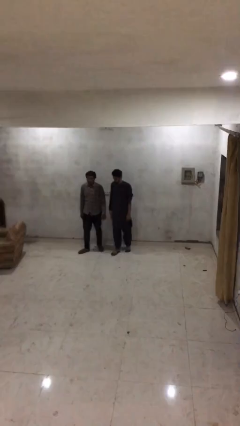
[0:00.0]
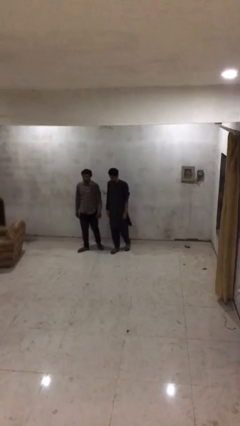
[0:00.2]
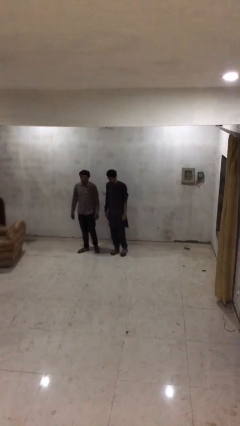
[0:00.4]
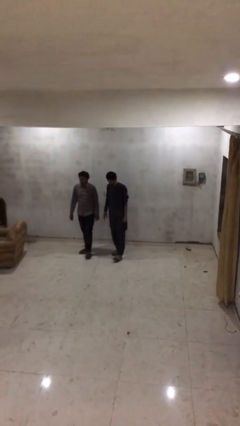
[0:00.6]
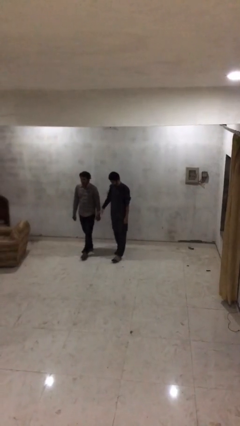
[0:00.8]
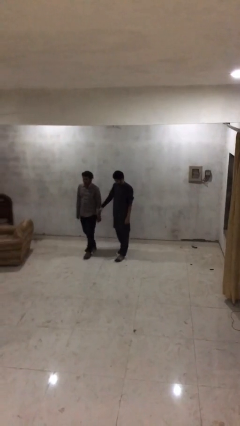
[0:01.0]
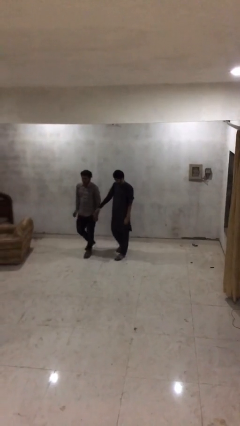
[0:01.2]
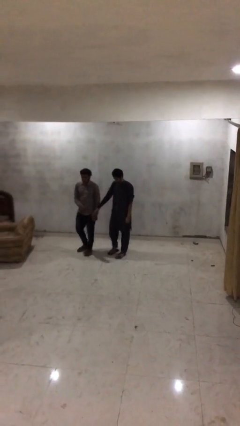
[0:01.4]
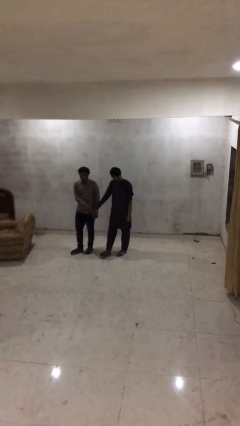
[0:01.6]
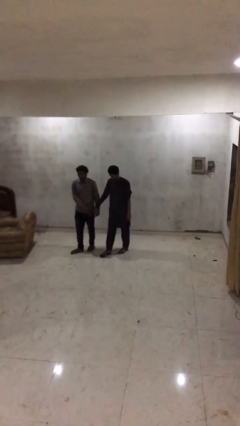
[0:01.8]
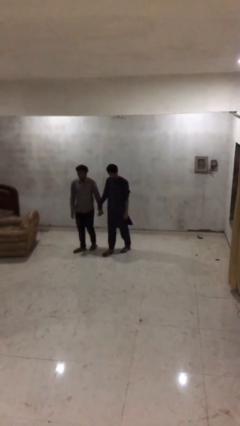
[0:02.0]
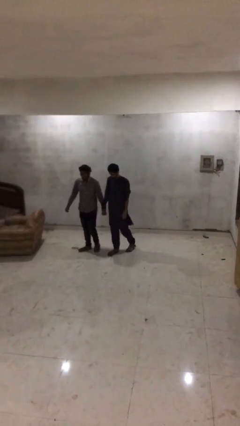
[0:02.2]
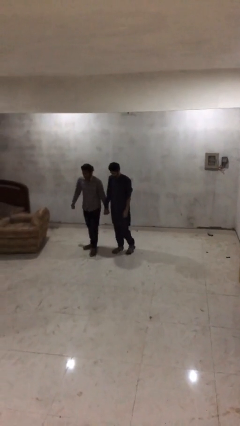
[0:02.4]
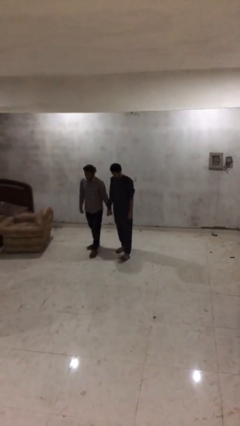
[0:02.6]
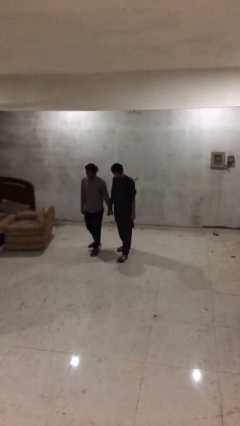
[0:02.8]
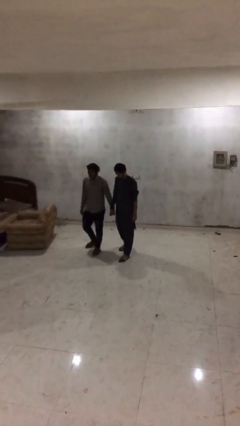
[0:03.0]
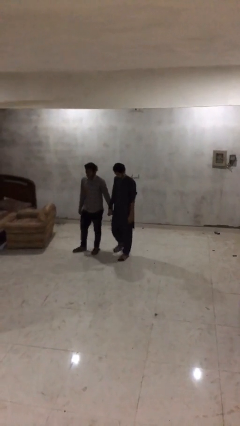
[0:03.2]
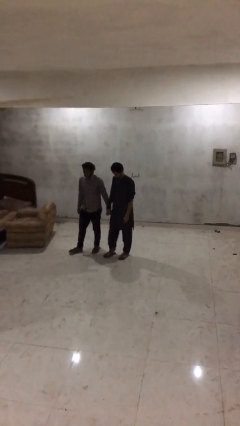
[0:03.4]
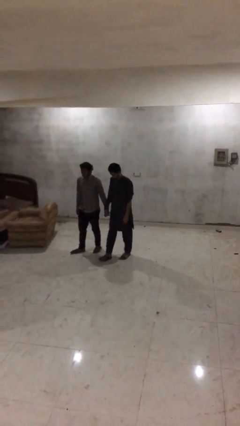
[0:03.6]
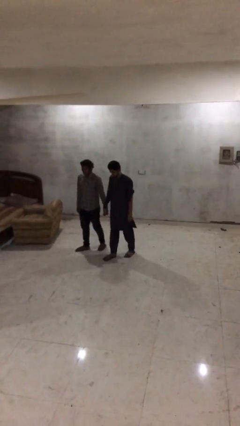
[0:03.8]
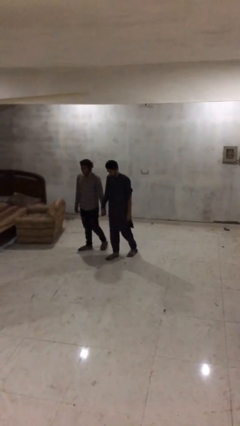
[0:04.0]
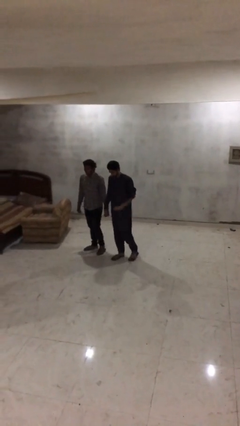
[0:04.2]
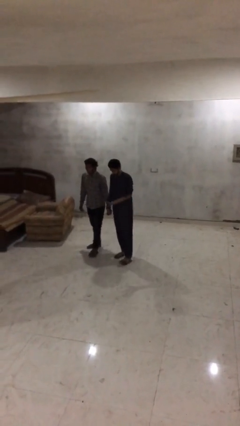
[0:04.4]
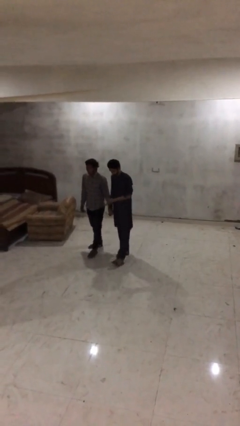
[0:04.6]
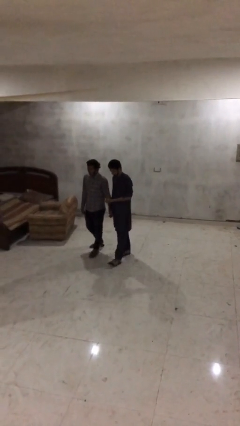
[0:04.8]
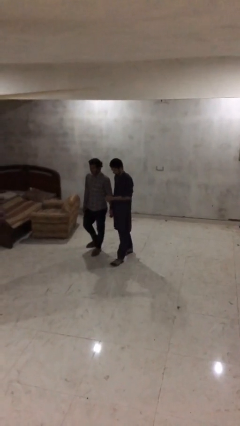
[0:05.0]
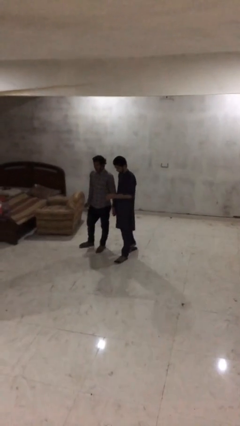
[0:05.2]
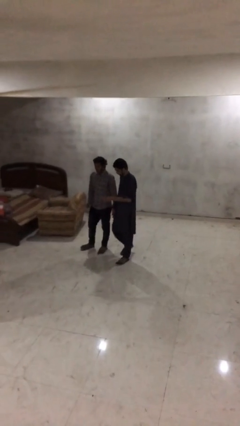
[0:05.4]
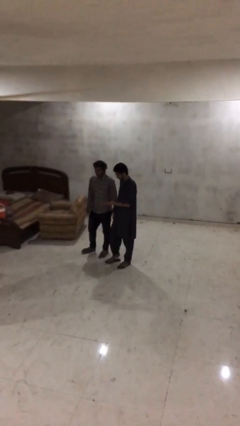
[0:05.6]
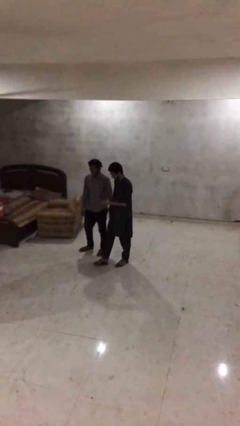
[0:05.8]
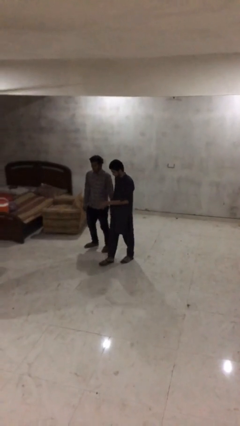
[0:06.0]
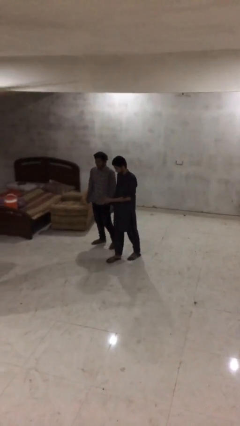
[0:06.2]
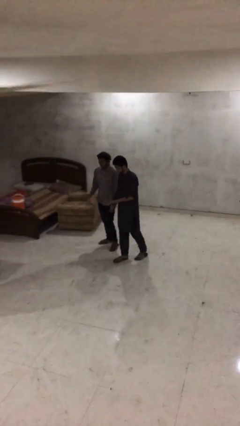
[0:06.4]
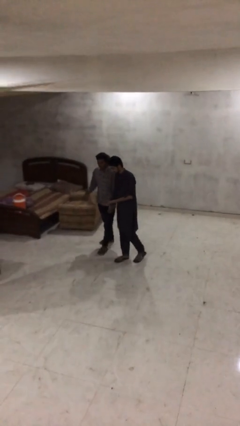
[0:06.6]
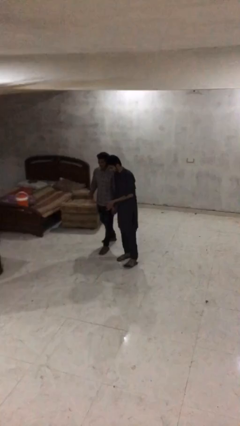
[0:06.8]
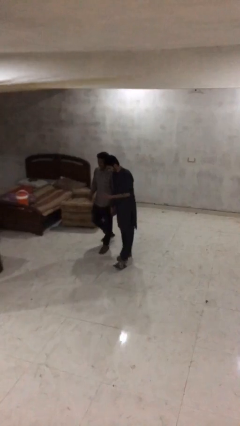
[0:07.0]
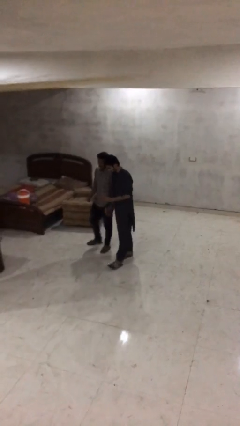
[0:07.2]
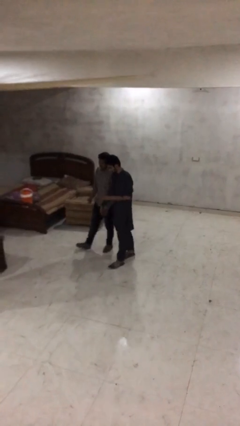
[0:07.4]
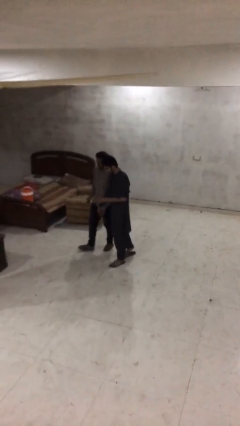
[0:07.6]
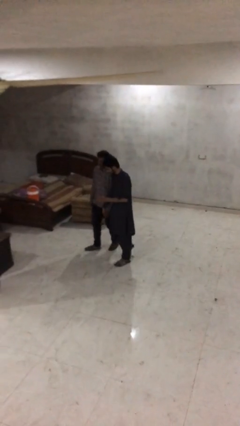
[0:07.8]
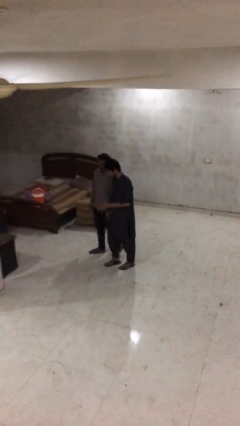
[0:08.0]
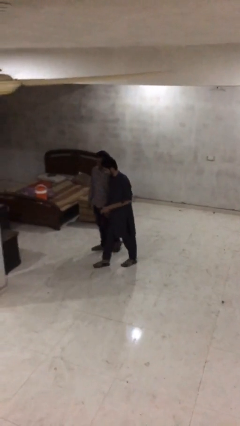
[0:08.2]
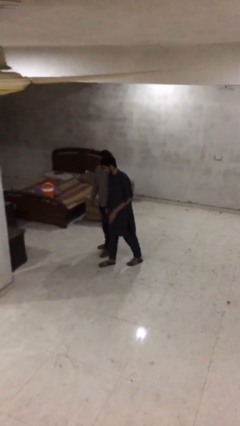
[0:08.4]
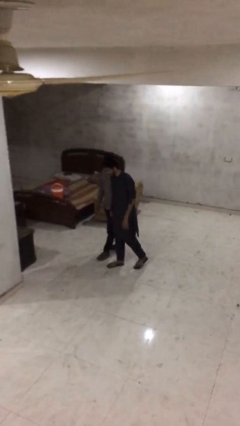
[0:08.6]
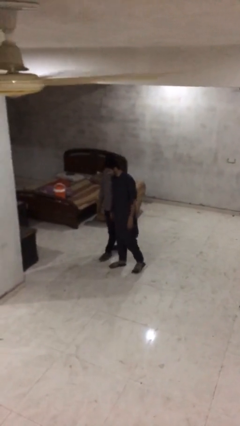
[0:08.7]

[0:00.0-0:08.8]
person holds hand

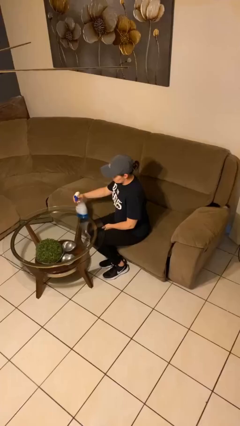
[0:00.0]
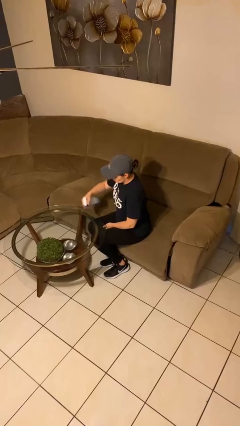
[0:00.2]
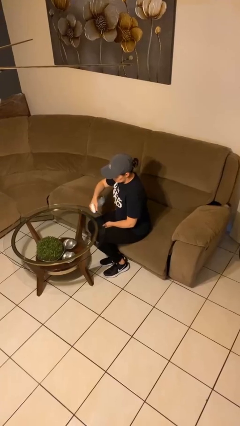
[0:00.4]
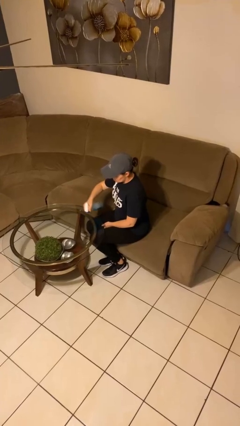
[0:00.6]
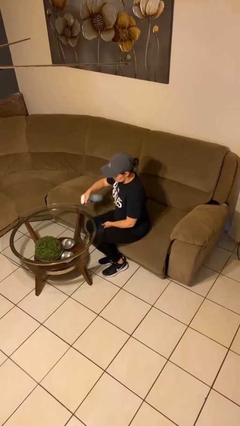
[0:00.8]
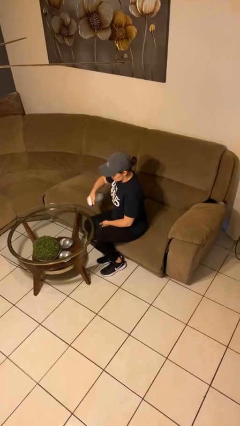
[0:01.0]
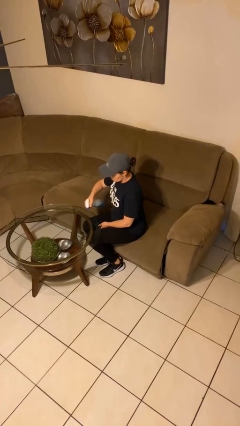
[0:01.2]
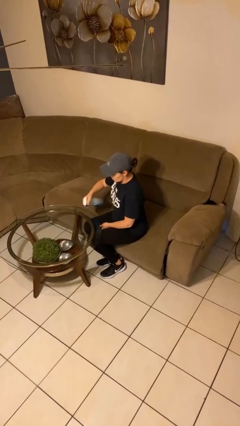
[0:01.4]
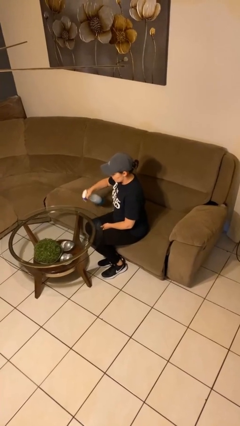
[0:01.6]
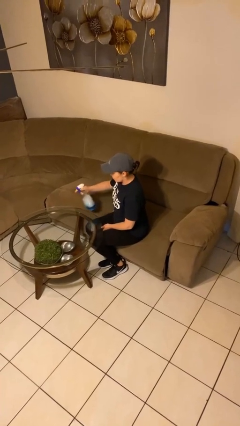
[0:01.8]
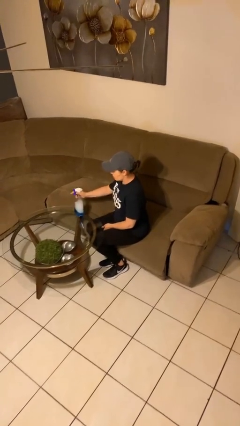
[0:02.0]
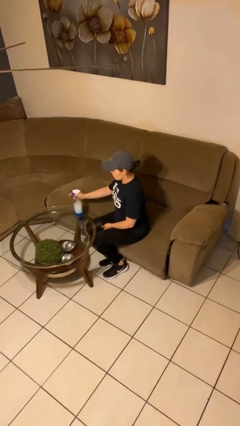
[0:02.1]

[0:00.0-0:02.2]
person sprays from bottle

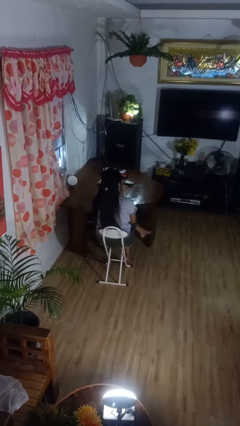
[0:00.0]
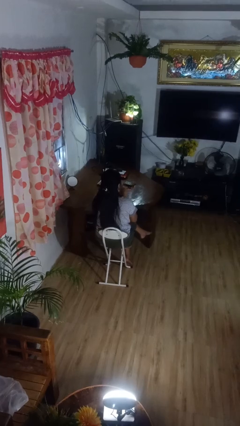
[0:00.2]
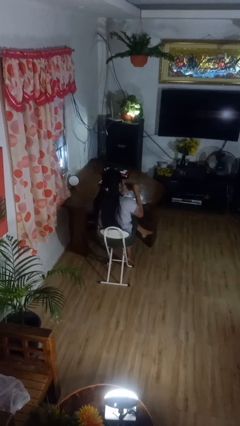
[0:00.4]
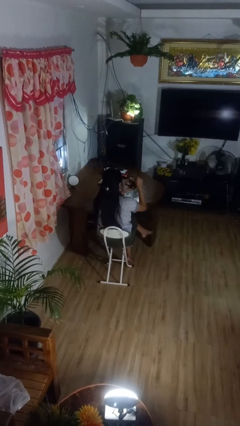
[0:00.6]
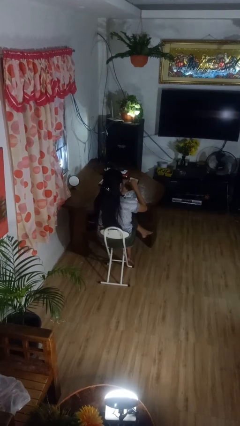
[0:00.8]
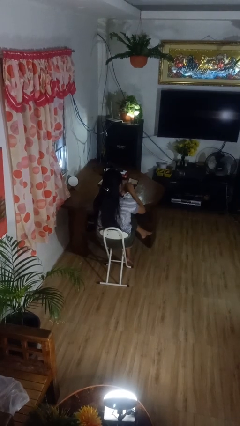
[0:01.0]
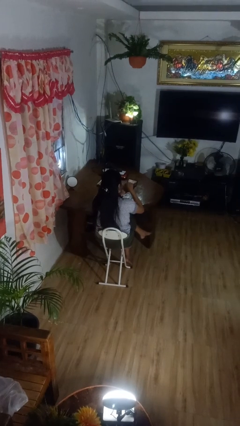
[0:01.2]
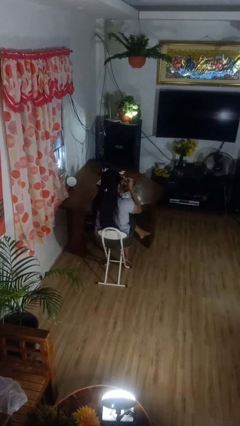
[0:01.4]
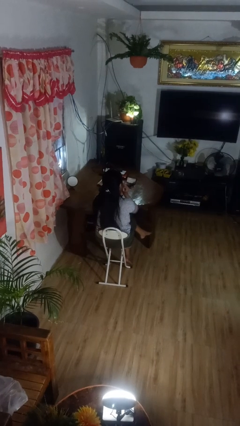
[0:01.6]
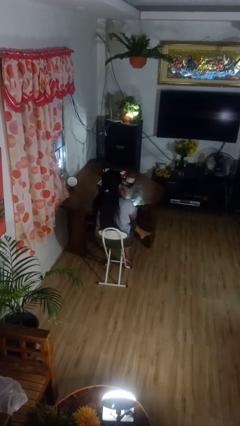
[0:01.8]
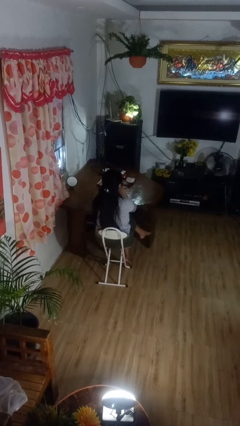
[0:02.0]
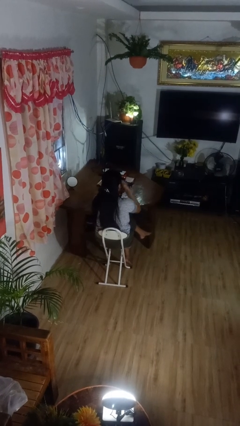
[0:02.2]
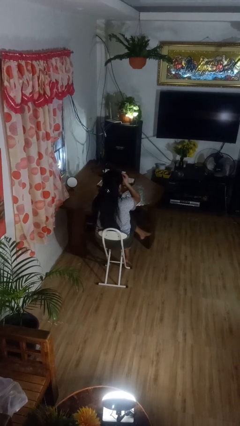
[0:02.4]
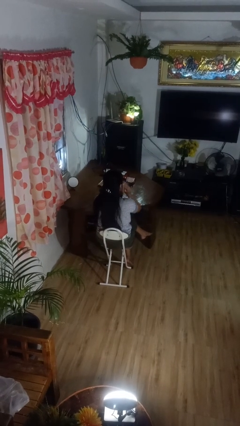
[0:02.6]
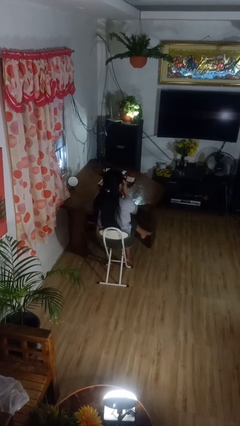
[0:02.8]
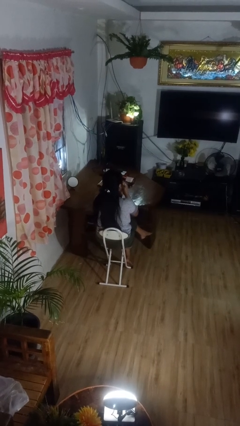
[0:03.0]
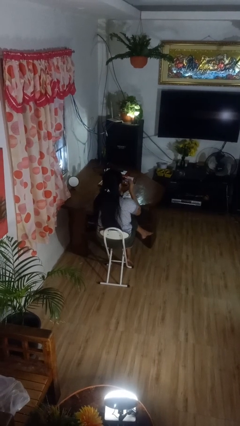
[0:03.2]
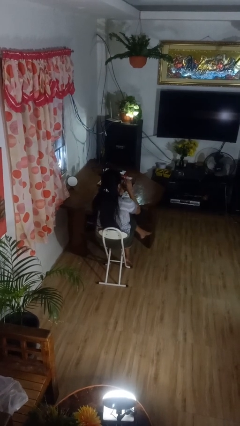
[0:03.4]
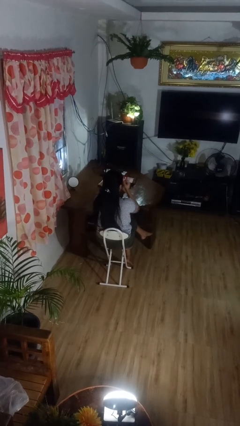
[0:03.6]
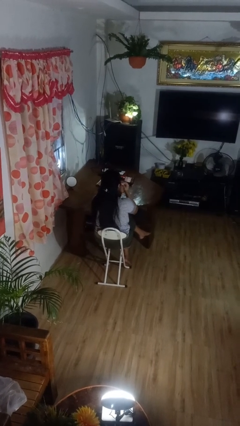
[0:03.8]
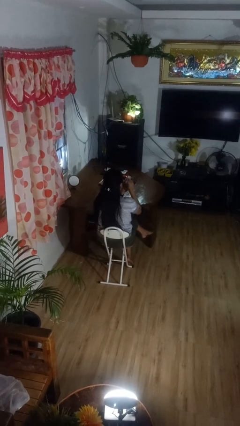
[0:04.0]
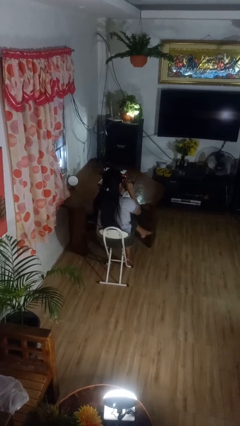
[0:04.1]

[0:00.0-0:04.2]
person applies foundation makeup

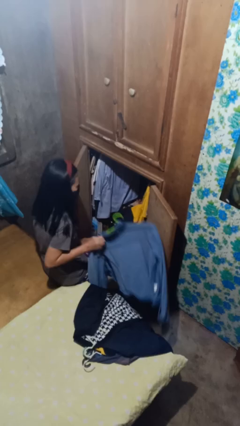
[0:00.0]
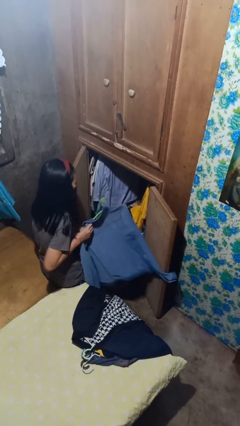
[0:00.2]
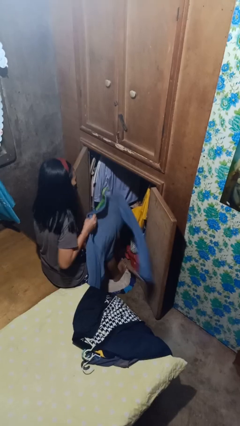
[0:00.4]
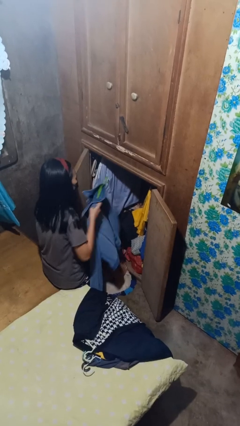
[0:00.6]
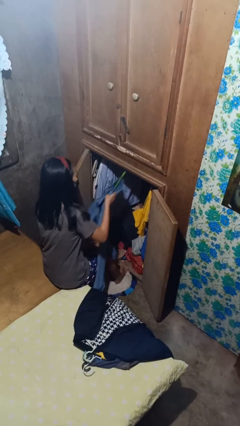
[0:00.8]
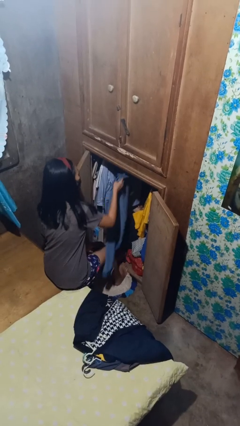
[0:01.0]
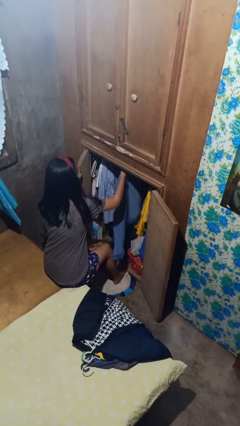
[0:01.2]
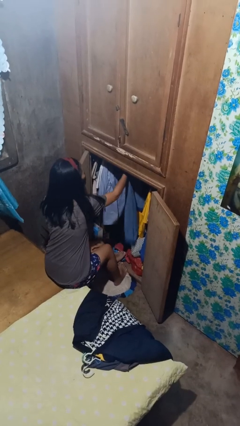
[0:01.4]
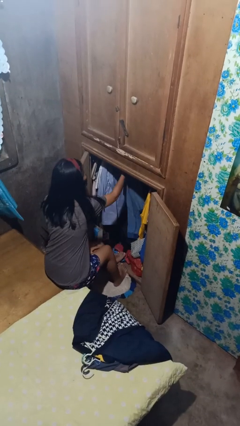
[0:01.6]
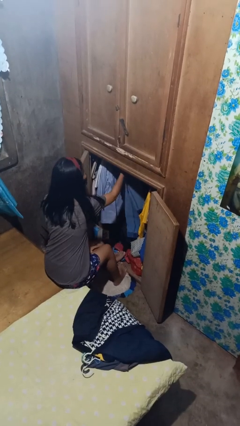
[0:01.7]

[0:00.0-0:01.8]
person puts clothes into closet

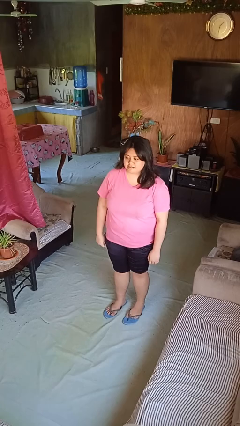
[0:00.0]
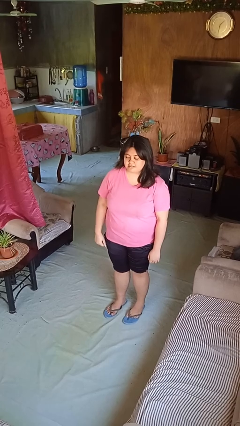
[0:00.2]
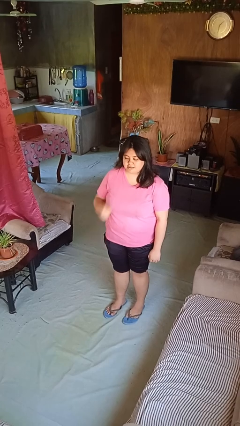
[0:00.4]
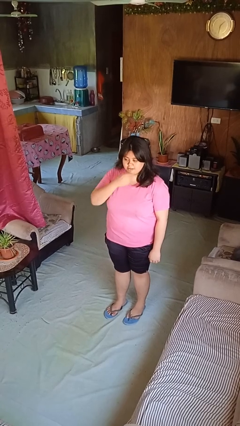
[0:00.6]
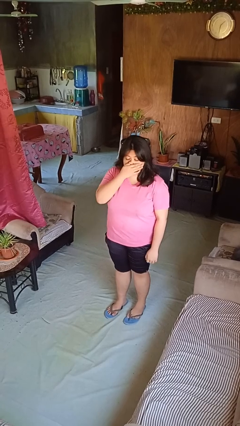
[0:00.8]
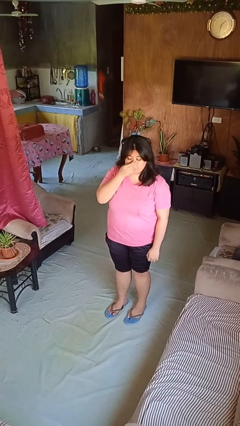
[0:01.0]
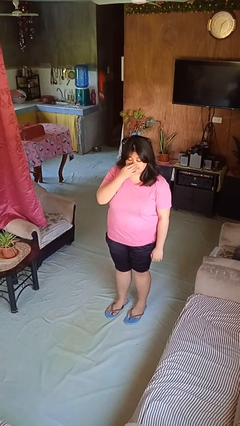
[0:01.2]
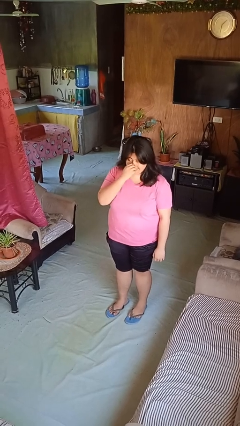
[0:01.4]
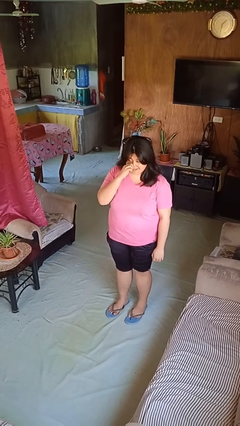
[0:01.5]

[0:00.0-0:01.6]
person scratches face
